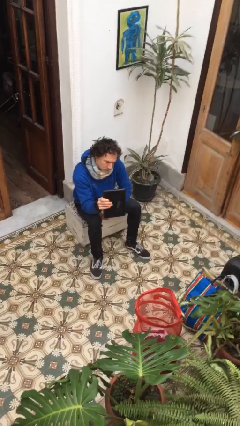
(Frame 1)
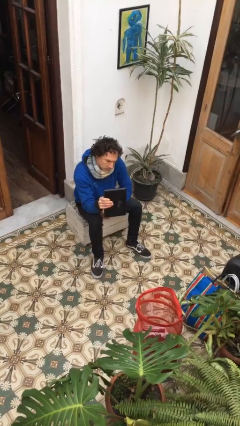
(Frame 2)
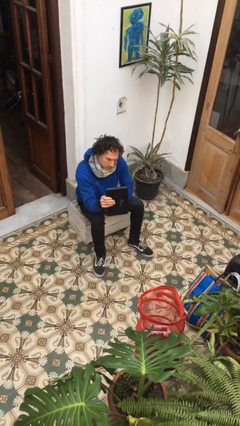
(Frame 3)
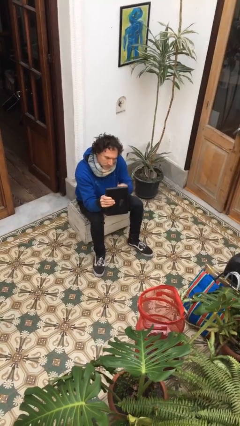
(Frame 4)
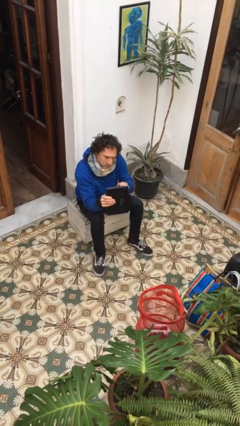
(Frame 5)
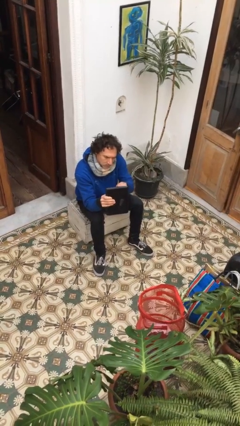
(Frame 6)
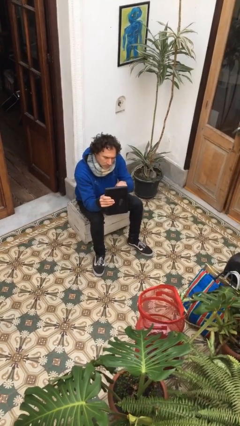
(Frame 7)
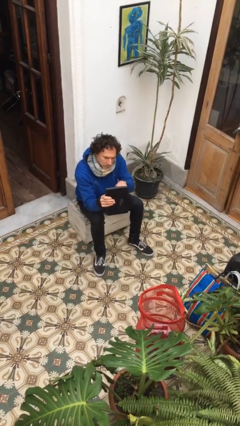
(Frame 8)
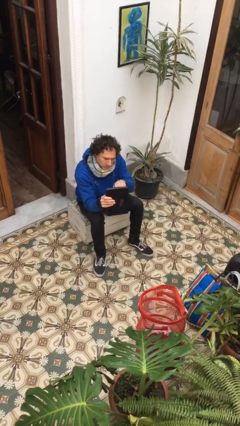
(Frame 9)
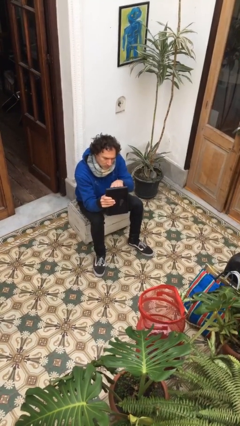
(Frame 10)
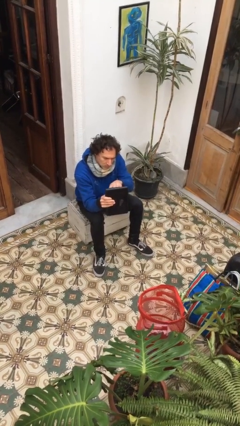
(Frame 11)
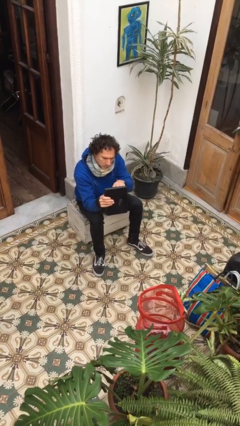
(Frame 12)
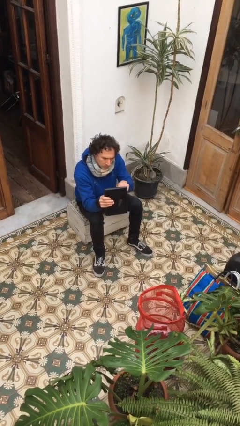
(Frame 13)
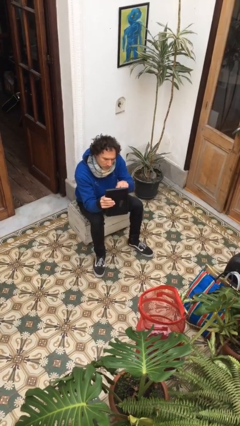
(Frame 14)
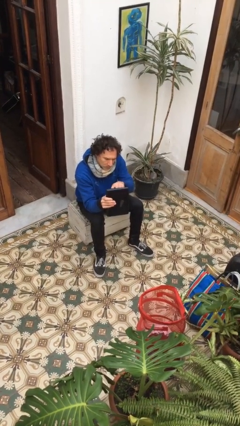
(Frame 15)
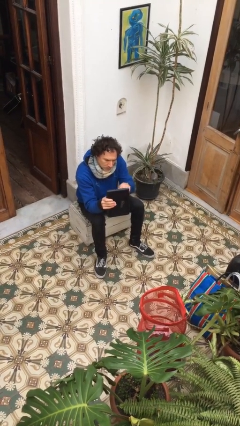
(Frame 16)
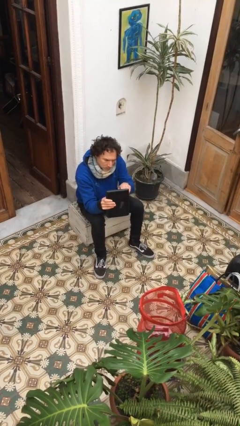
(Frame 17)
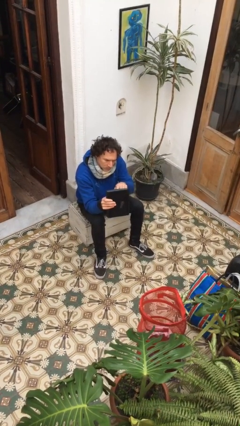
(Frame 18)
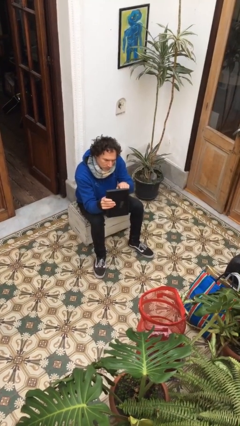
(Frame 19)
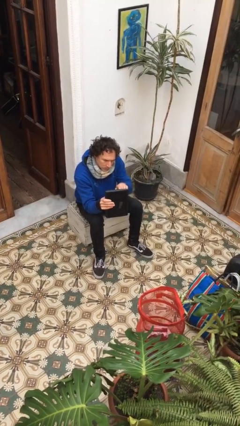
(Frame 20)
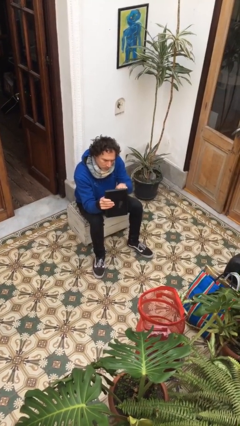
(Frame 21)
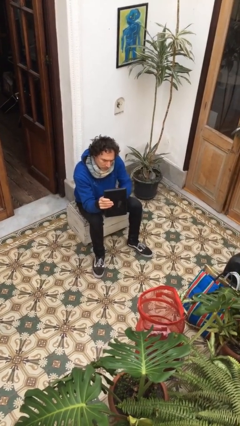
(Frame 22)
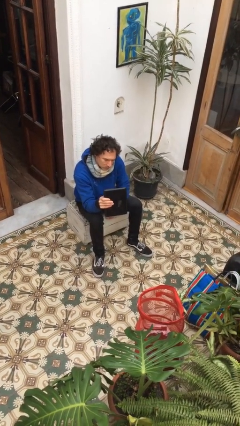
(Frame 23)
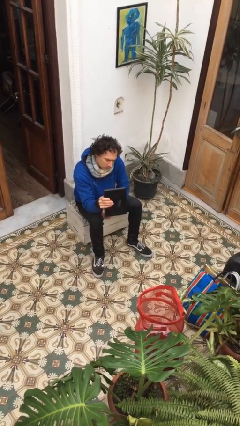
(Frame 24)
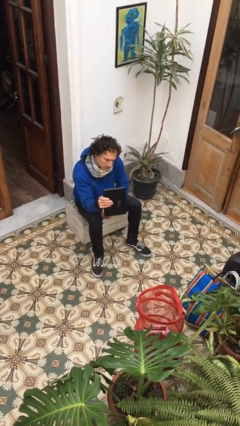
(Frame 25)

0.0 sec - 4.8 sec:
person interacts with tablet

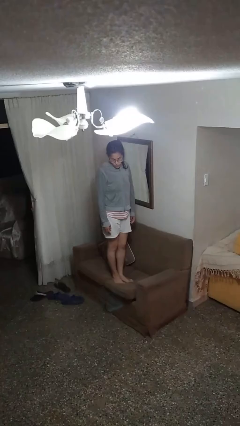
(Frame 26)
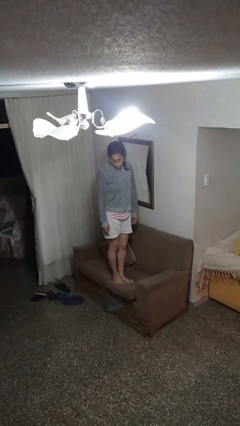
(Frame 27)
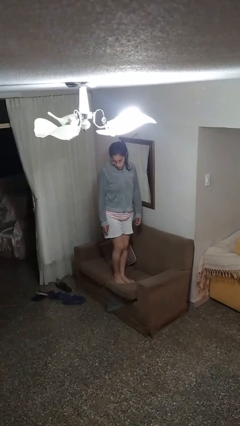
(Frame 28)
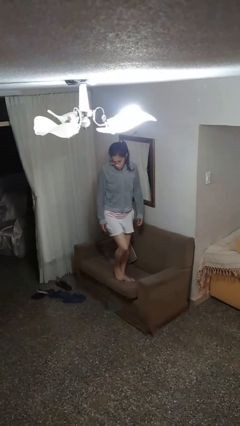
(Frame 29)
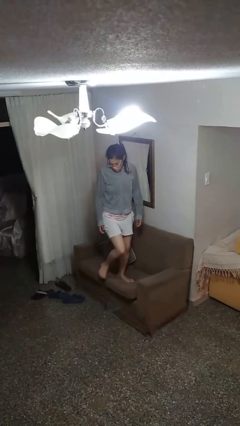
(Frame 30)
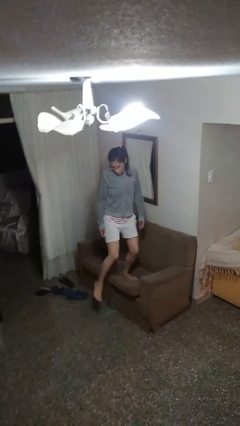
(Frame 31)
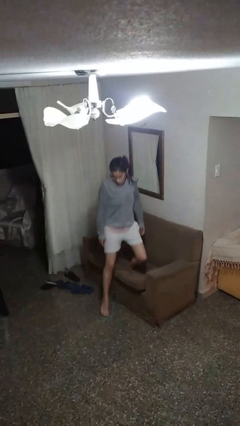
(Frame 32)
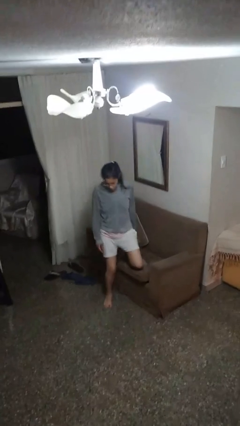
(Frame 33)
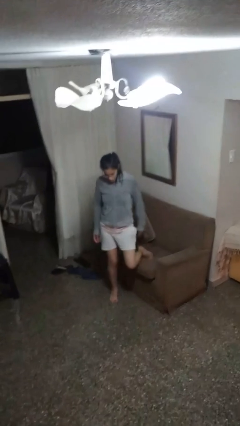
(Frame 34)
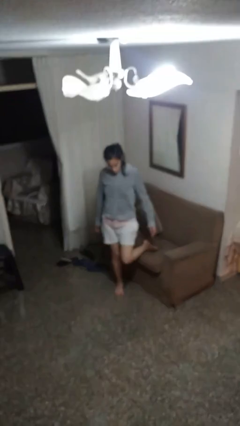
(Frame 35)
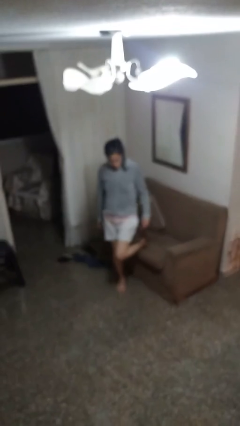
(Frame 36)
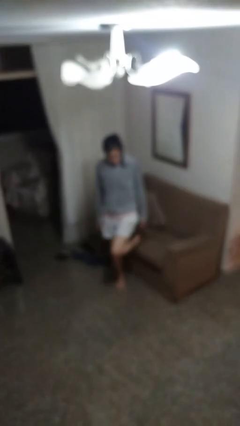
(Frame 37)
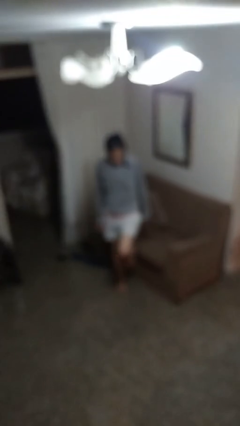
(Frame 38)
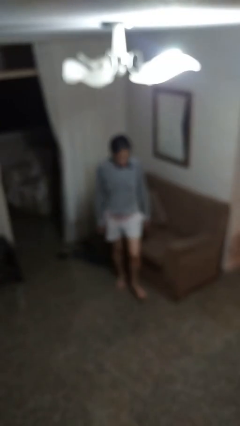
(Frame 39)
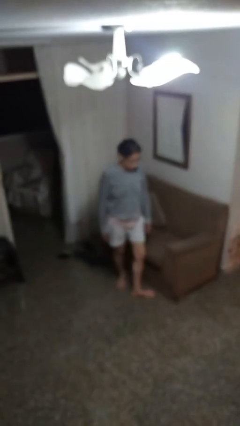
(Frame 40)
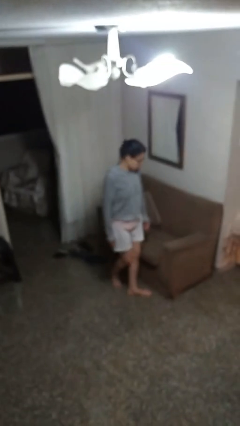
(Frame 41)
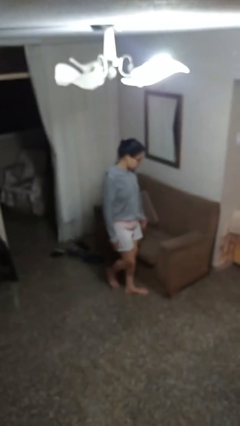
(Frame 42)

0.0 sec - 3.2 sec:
person climbs off couch

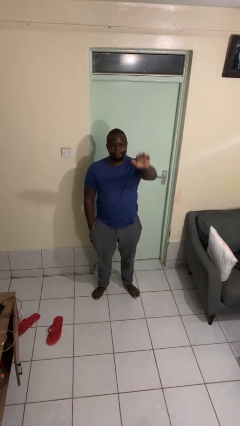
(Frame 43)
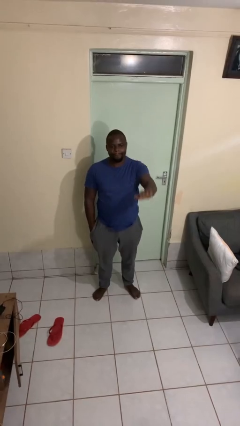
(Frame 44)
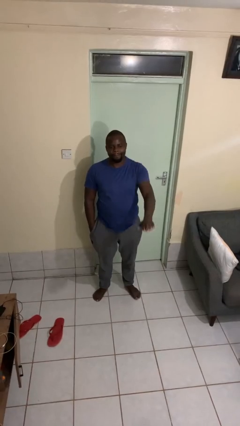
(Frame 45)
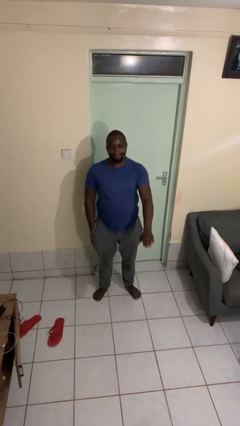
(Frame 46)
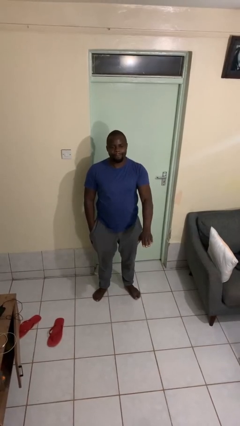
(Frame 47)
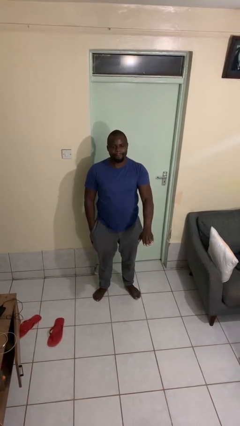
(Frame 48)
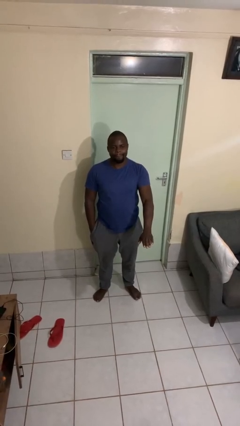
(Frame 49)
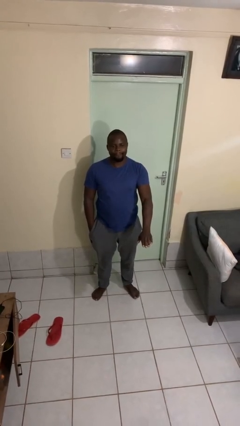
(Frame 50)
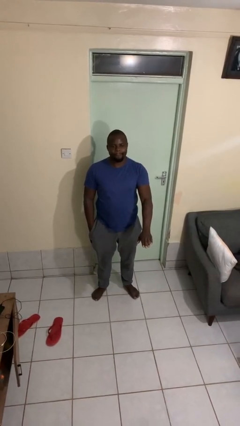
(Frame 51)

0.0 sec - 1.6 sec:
person gestures swipe down

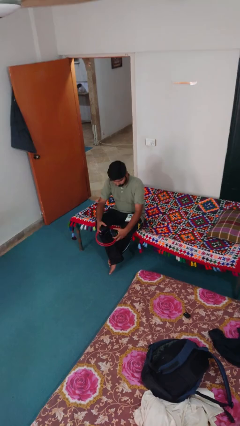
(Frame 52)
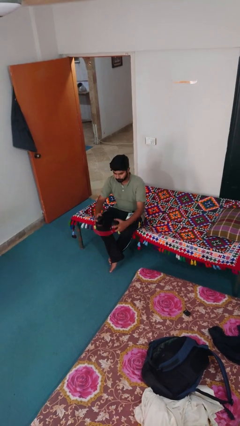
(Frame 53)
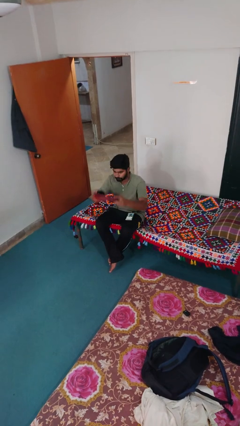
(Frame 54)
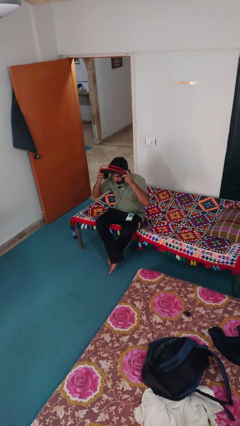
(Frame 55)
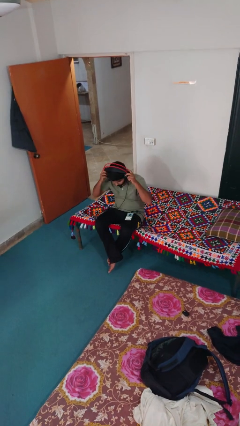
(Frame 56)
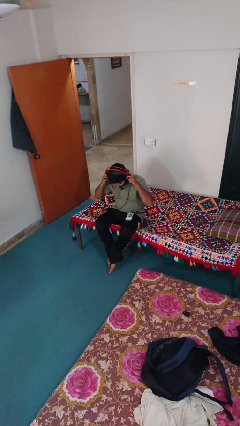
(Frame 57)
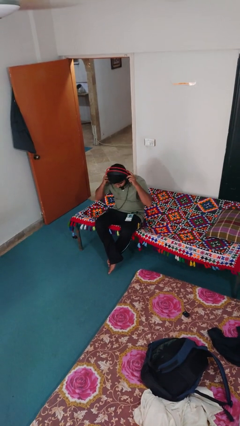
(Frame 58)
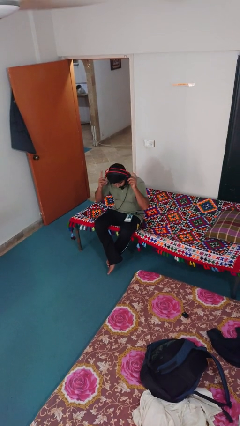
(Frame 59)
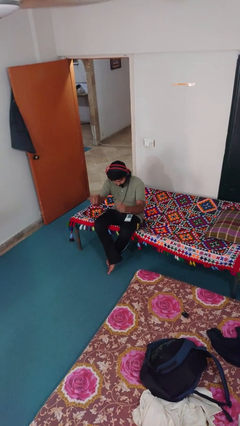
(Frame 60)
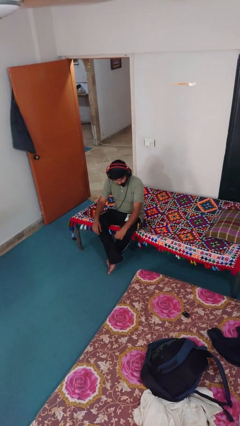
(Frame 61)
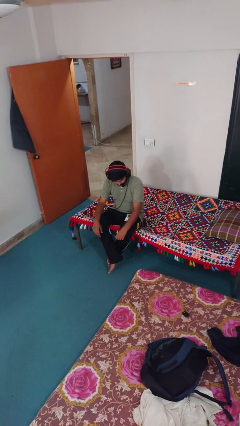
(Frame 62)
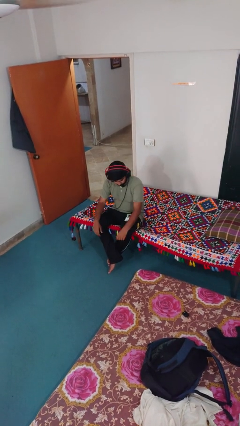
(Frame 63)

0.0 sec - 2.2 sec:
person puts on headphones

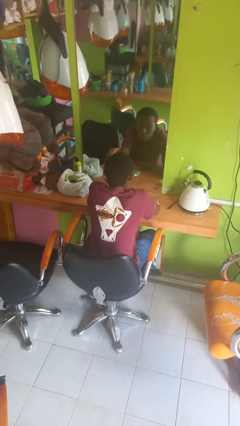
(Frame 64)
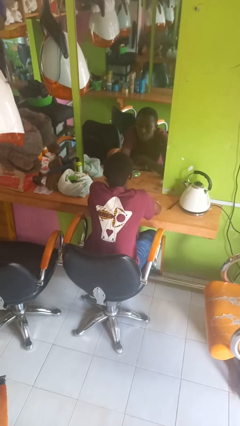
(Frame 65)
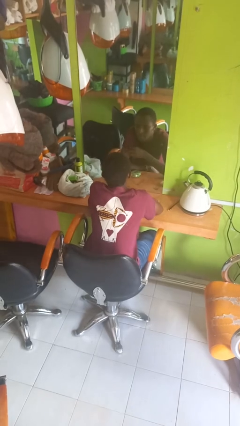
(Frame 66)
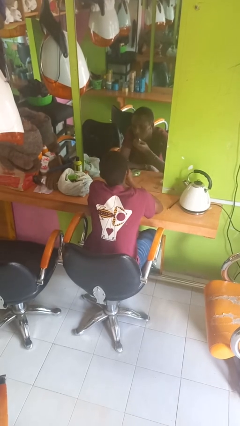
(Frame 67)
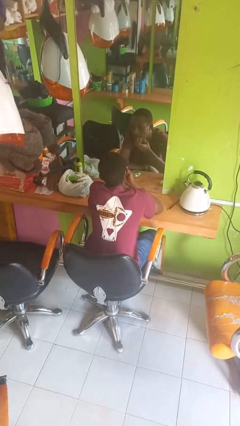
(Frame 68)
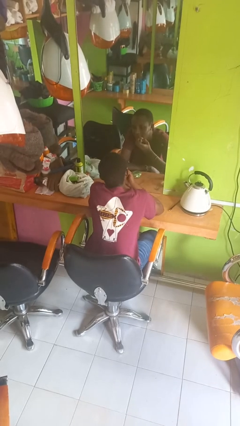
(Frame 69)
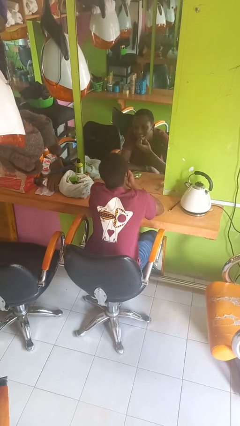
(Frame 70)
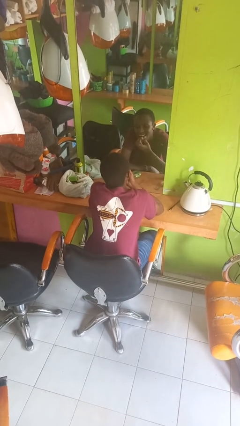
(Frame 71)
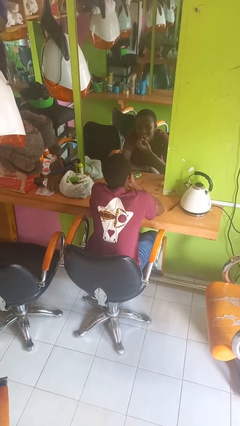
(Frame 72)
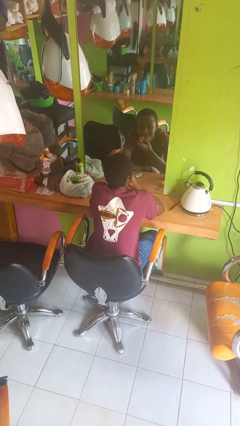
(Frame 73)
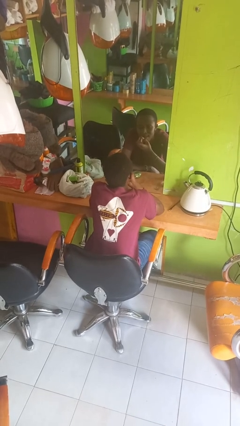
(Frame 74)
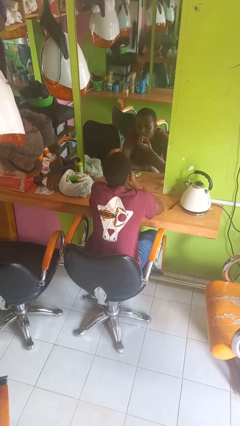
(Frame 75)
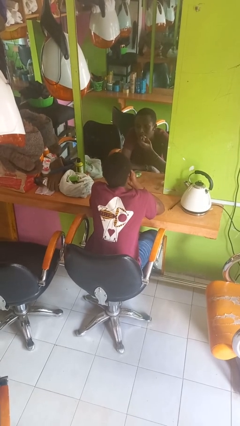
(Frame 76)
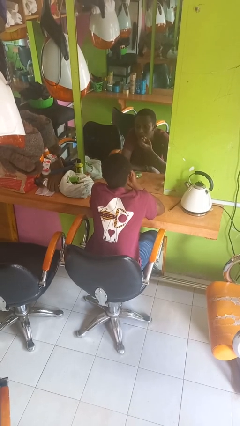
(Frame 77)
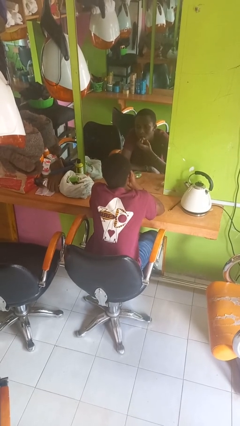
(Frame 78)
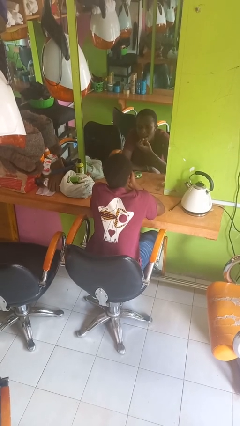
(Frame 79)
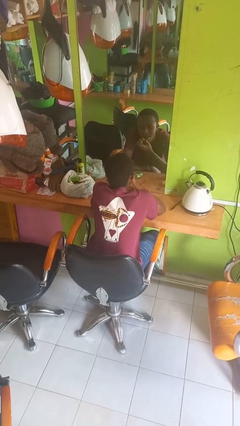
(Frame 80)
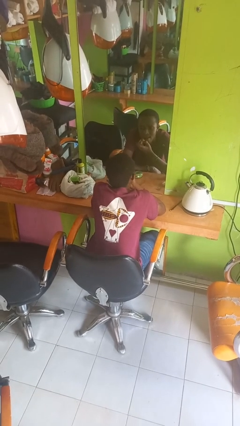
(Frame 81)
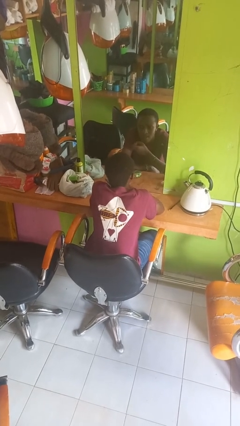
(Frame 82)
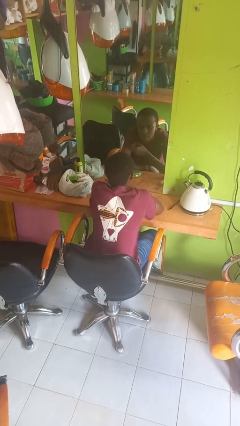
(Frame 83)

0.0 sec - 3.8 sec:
person applies lip makeup

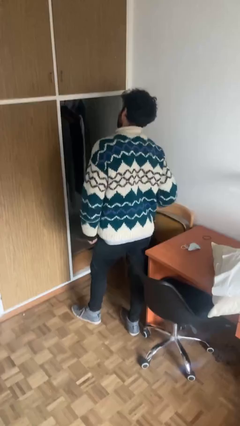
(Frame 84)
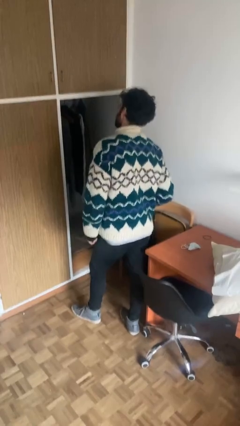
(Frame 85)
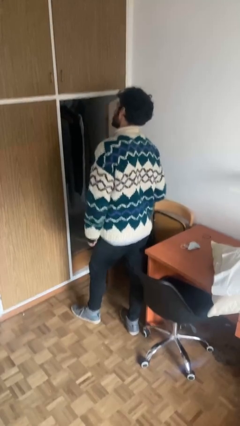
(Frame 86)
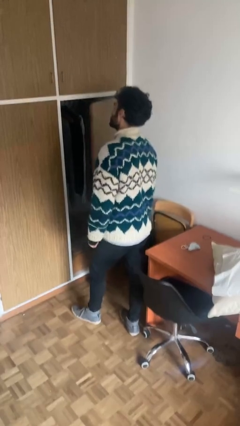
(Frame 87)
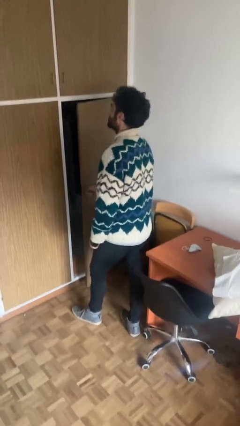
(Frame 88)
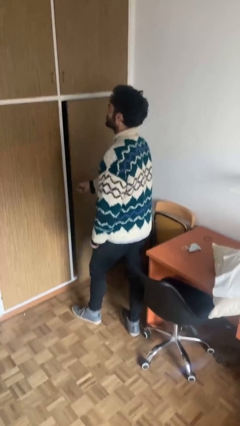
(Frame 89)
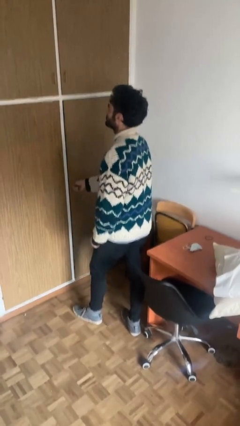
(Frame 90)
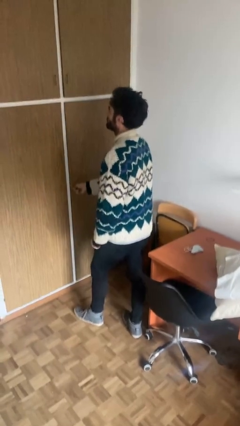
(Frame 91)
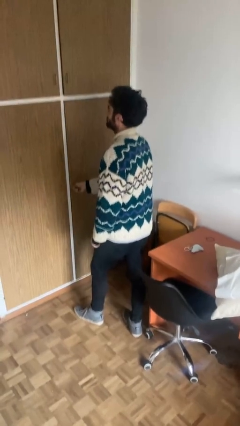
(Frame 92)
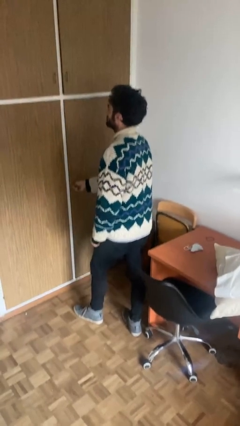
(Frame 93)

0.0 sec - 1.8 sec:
person closes closet door
